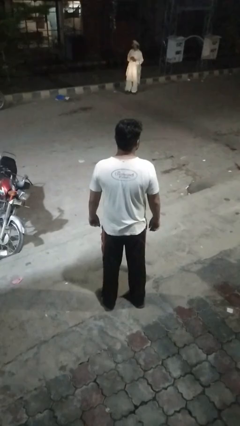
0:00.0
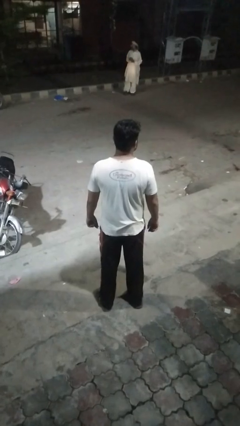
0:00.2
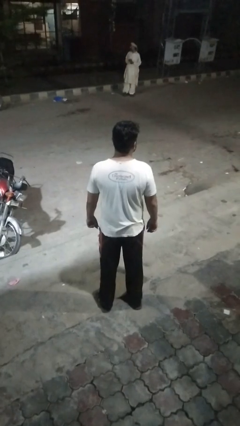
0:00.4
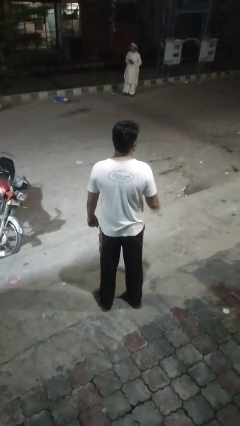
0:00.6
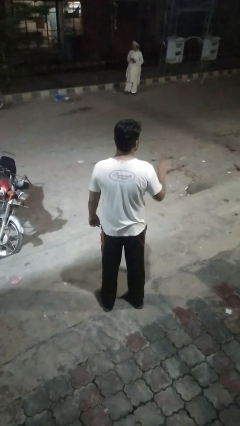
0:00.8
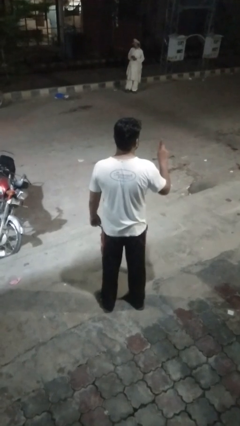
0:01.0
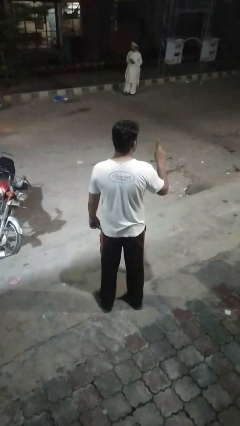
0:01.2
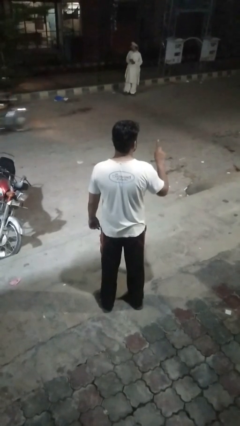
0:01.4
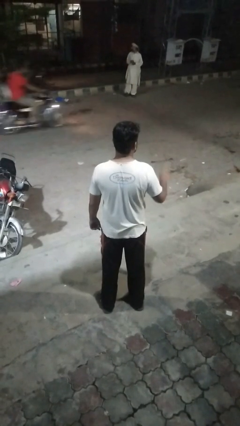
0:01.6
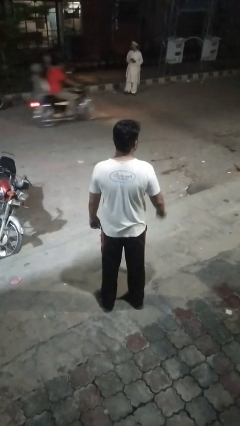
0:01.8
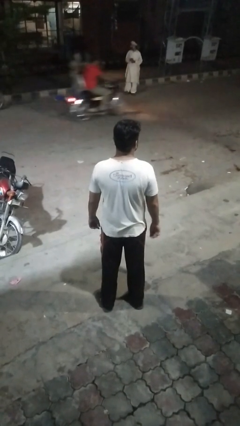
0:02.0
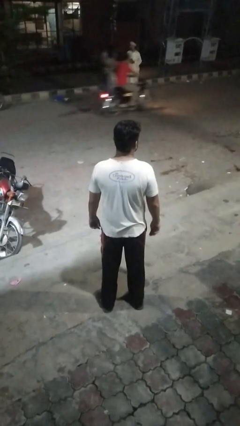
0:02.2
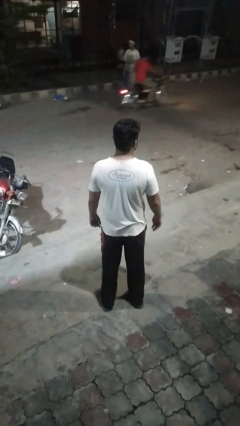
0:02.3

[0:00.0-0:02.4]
person gestures number one

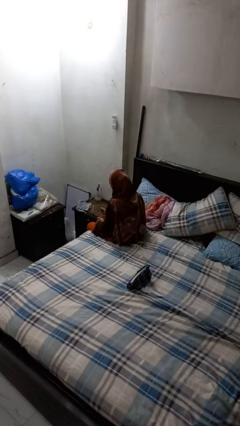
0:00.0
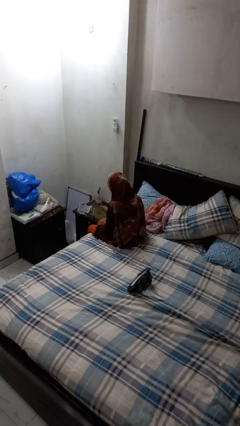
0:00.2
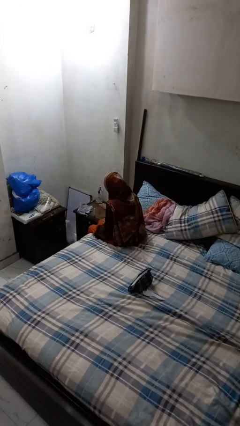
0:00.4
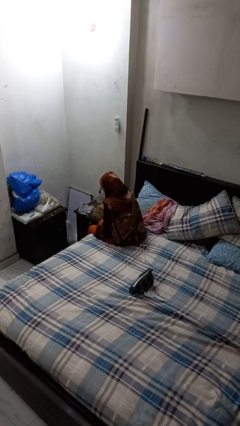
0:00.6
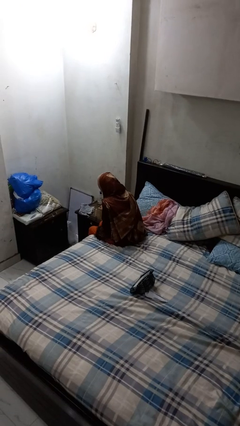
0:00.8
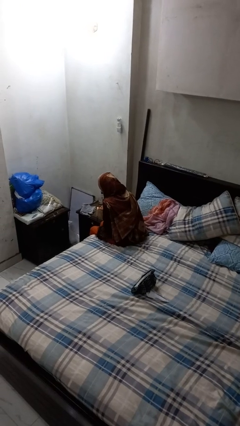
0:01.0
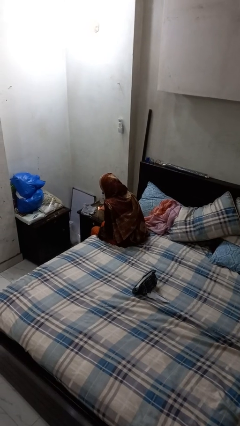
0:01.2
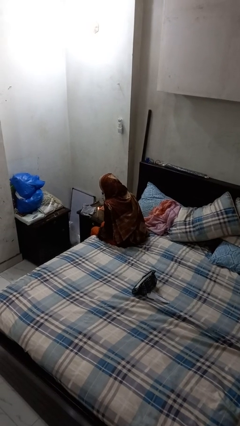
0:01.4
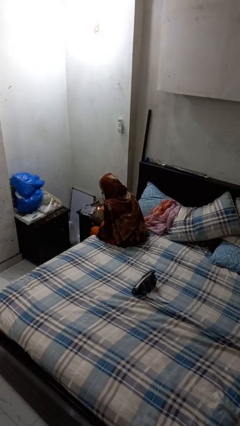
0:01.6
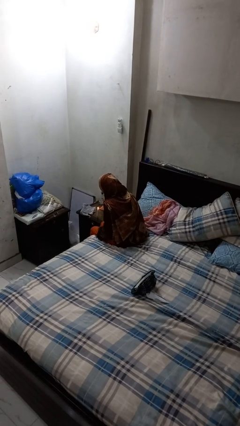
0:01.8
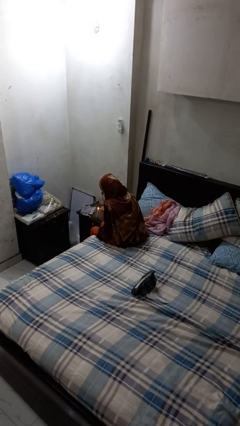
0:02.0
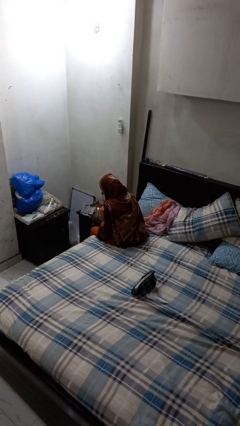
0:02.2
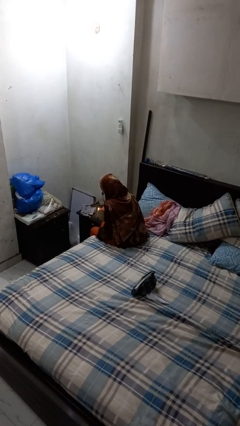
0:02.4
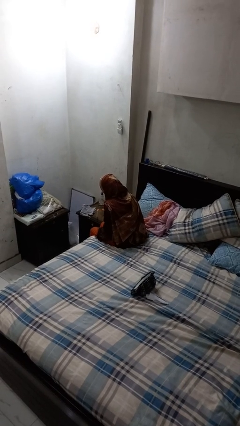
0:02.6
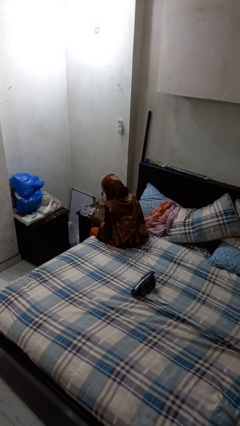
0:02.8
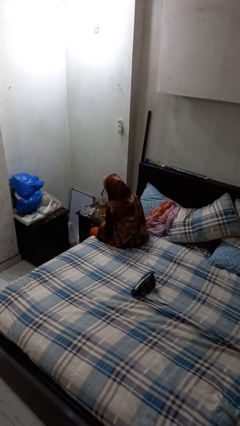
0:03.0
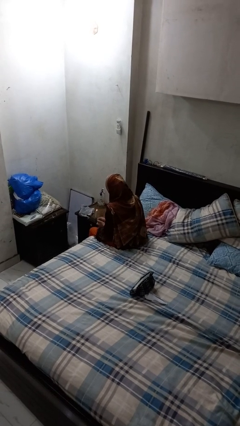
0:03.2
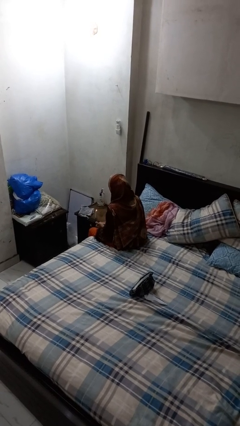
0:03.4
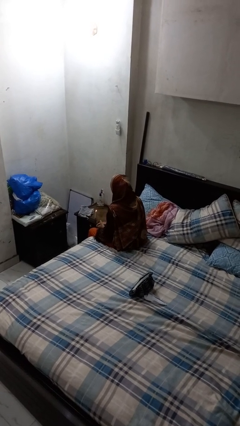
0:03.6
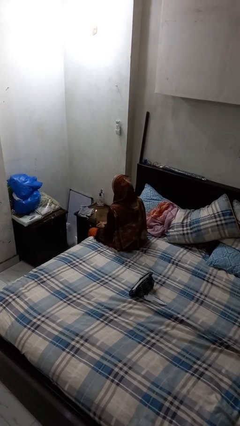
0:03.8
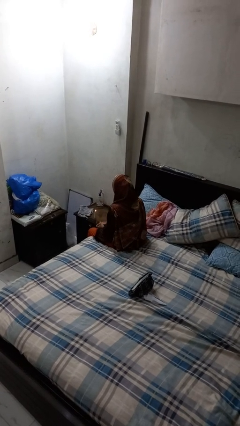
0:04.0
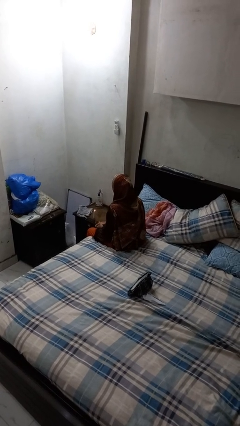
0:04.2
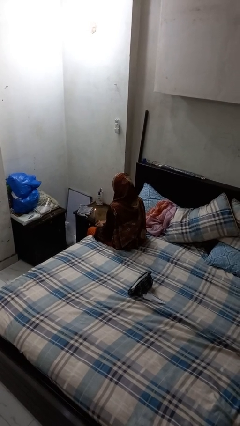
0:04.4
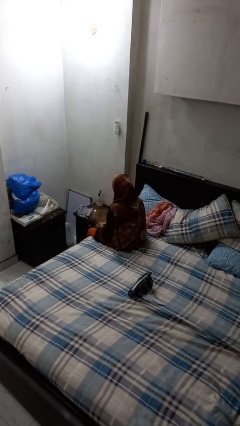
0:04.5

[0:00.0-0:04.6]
person lights candle

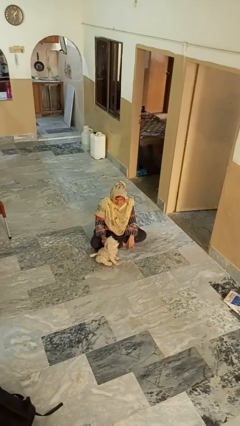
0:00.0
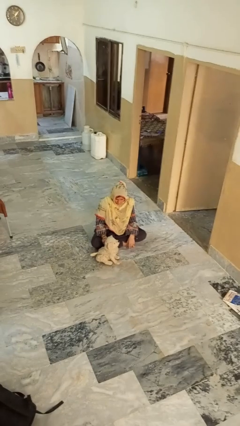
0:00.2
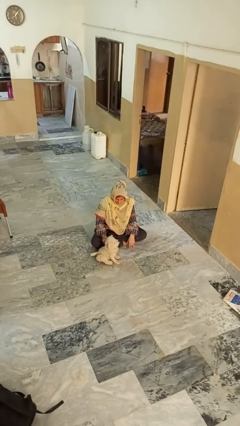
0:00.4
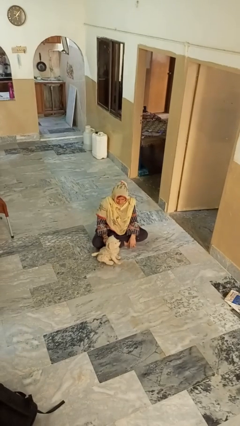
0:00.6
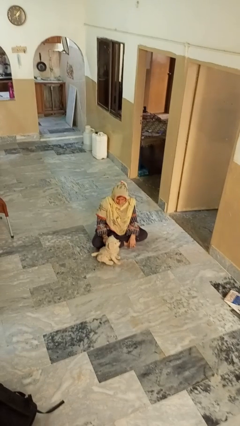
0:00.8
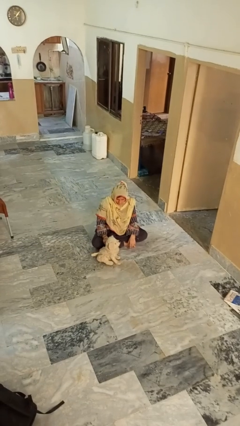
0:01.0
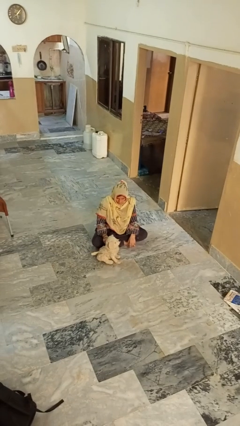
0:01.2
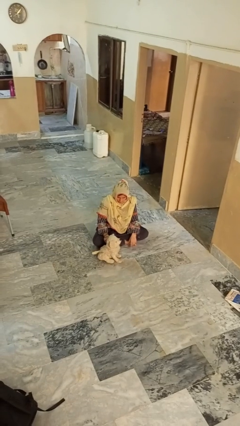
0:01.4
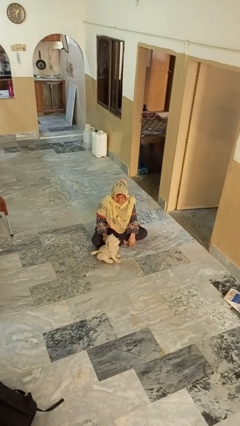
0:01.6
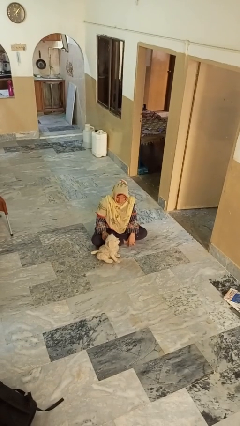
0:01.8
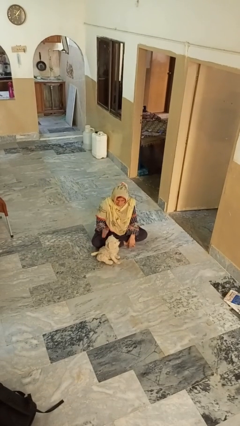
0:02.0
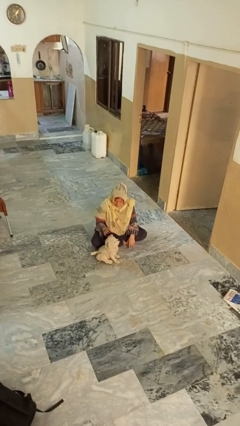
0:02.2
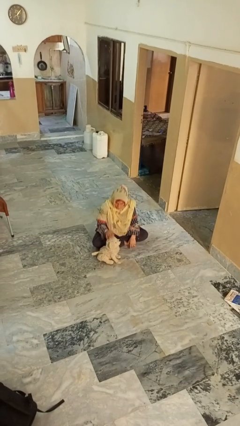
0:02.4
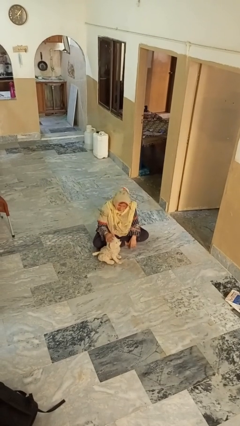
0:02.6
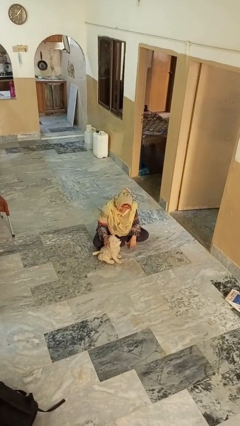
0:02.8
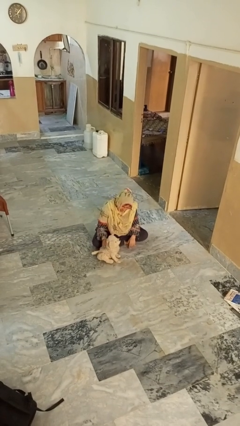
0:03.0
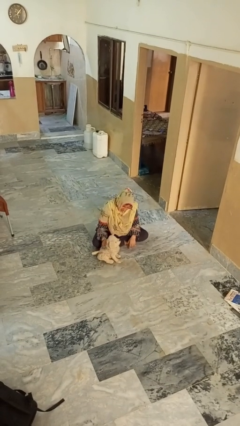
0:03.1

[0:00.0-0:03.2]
person pets dog

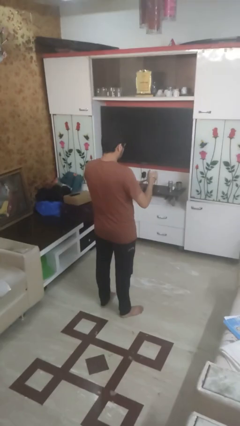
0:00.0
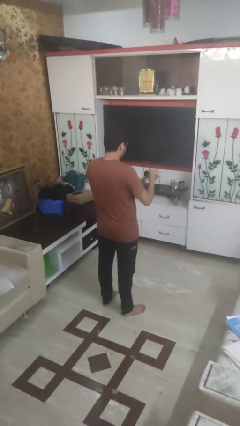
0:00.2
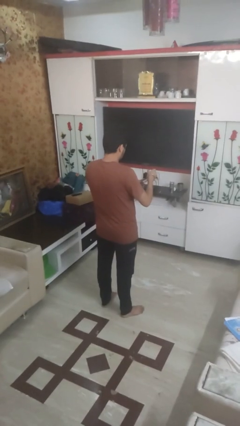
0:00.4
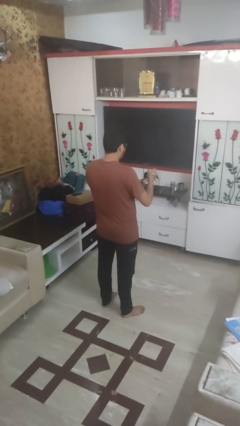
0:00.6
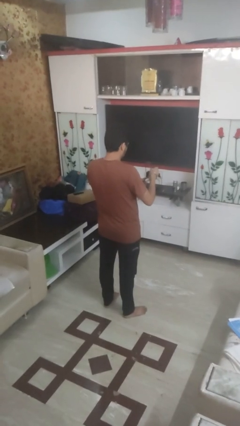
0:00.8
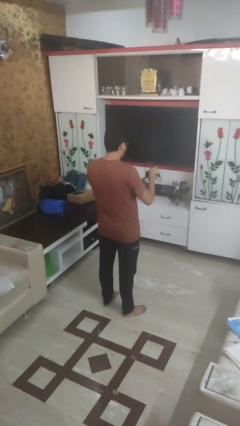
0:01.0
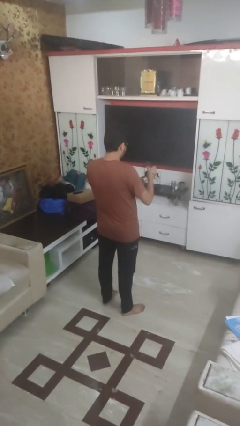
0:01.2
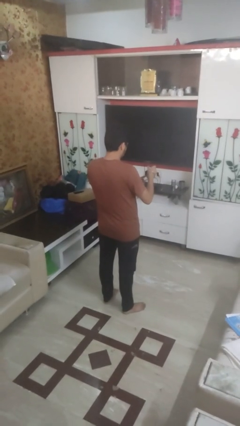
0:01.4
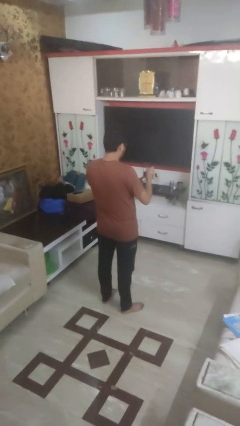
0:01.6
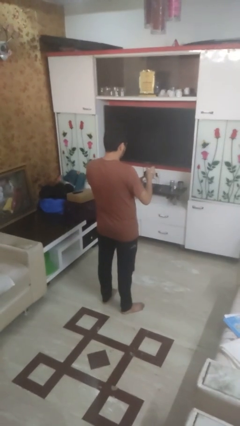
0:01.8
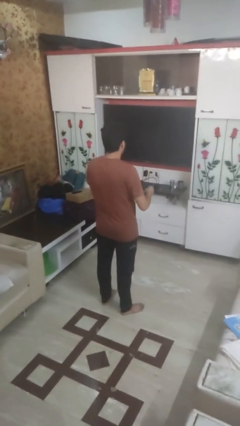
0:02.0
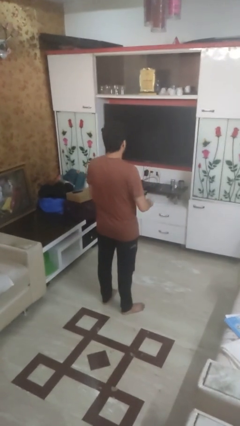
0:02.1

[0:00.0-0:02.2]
person clips fingernails

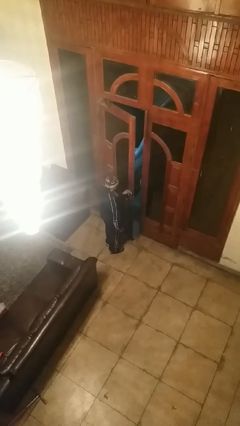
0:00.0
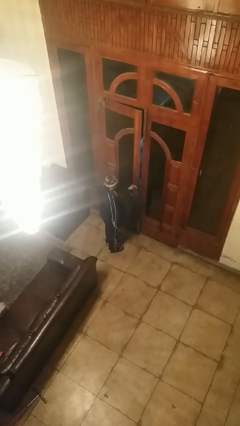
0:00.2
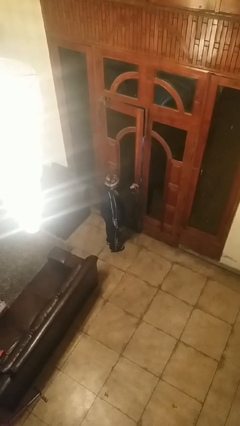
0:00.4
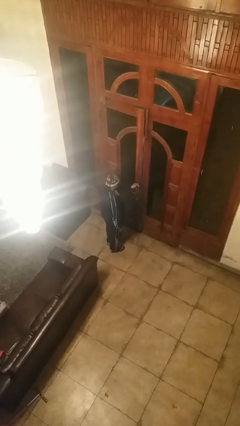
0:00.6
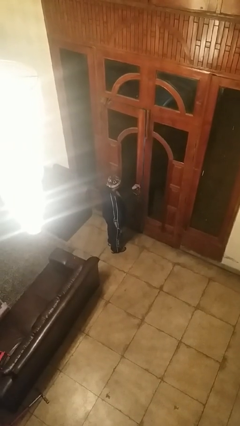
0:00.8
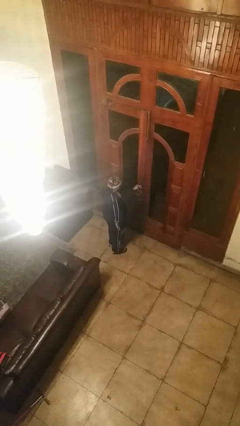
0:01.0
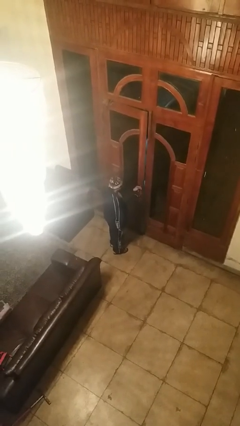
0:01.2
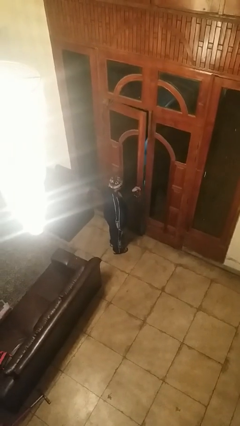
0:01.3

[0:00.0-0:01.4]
person closes facility door

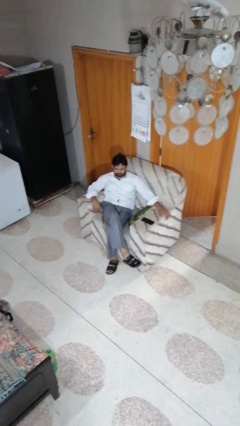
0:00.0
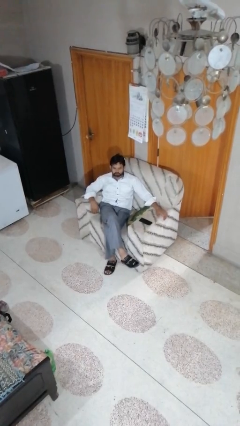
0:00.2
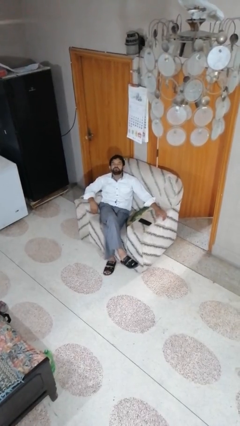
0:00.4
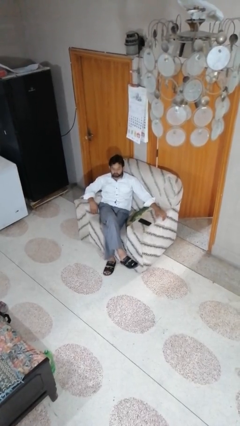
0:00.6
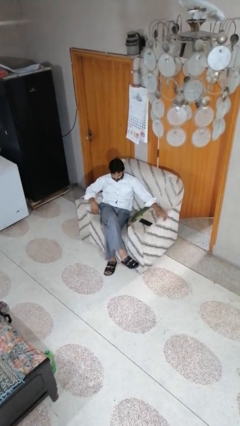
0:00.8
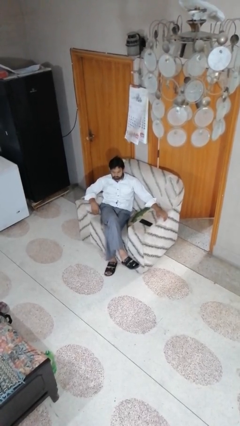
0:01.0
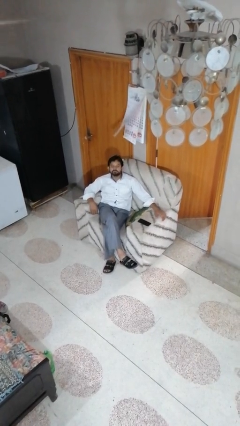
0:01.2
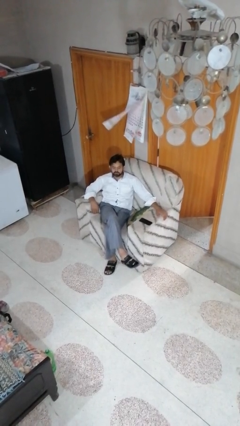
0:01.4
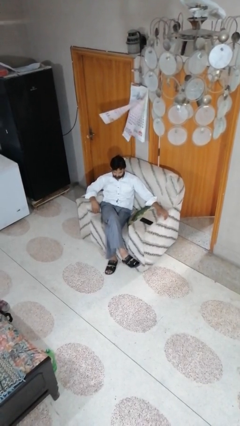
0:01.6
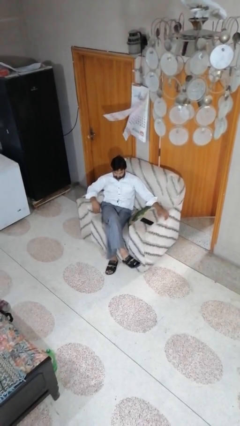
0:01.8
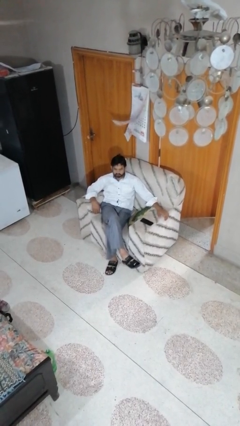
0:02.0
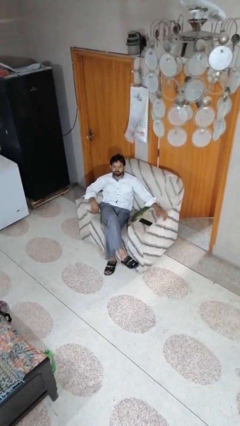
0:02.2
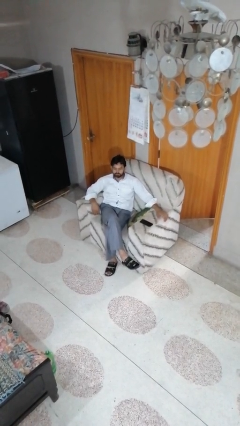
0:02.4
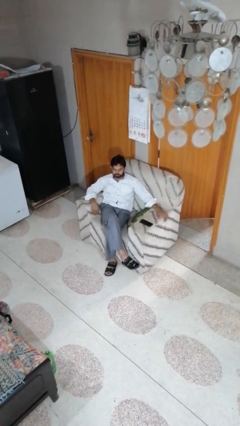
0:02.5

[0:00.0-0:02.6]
person nods head

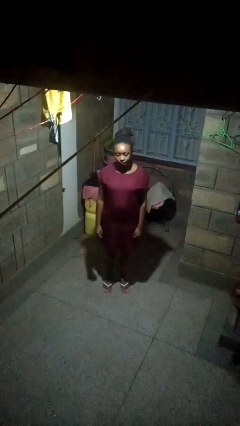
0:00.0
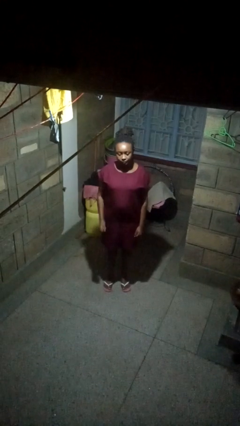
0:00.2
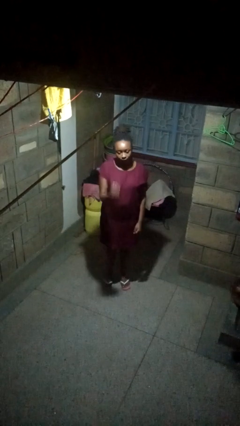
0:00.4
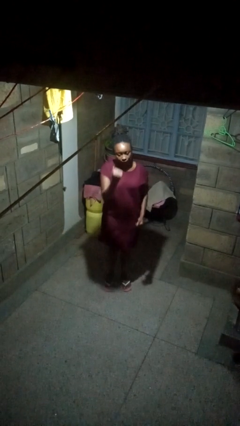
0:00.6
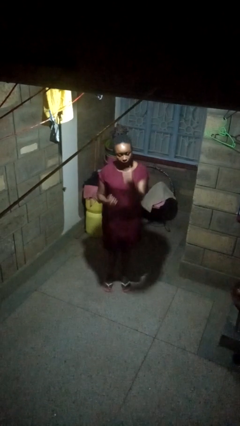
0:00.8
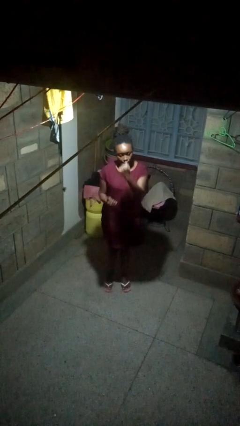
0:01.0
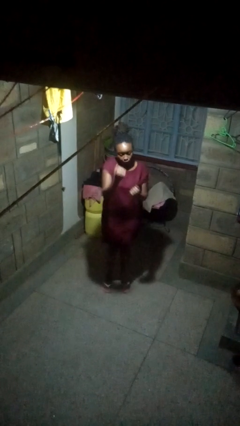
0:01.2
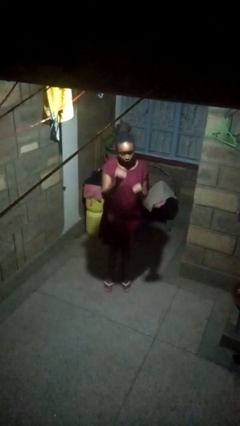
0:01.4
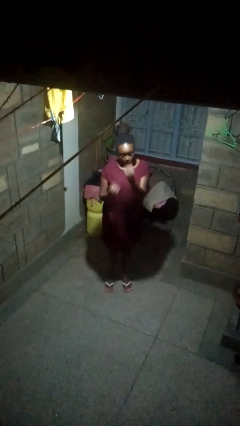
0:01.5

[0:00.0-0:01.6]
person punches
